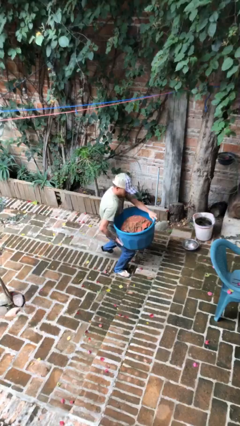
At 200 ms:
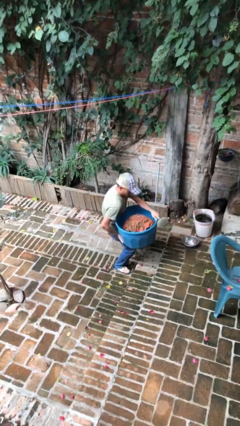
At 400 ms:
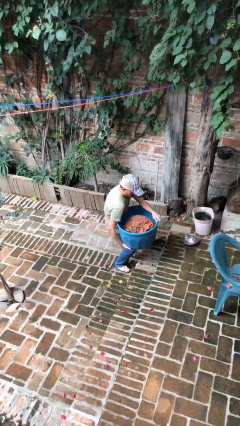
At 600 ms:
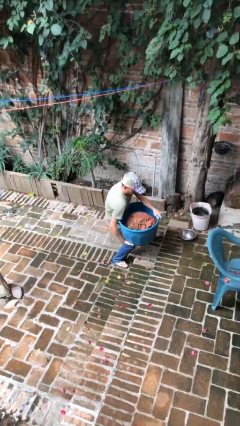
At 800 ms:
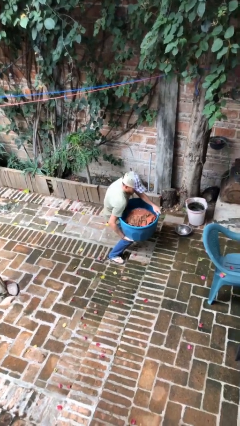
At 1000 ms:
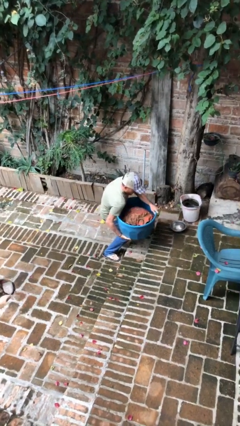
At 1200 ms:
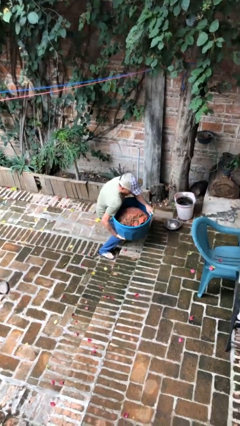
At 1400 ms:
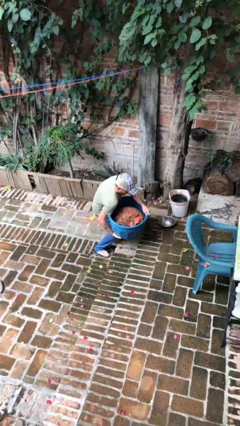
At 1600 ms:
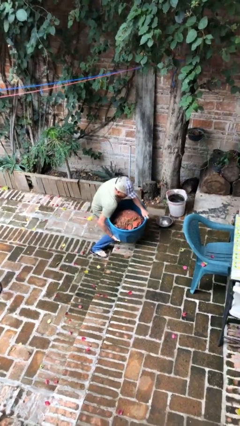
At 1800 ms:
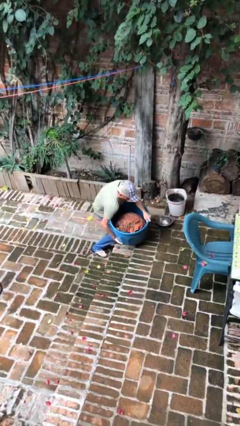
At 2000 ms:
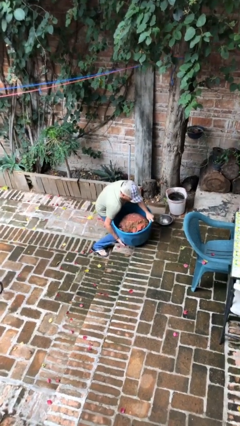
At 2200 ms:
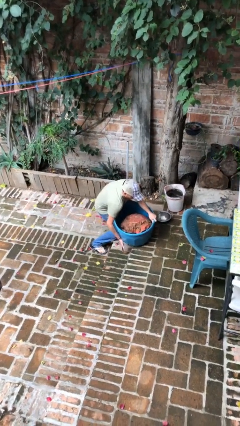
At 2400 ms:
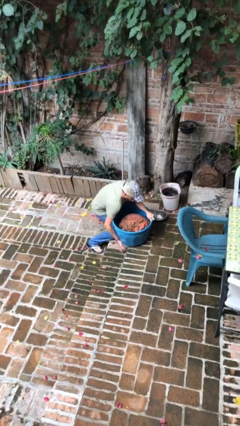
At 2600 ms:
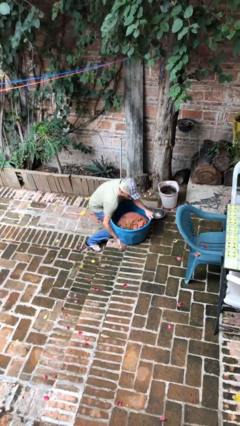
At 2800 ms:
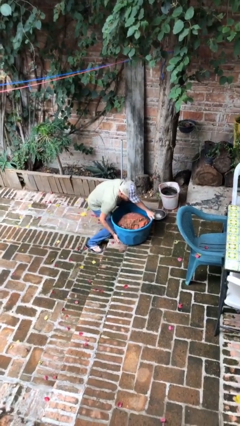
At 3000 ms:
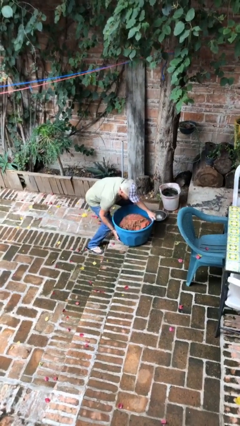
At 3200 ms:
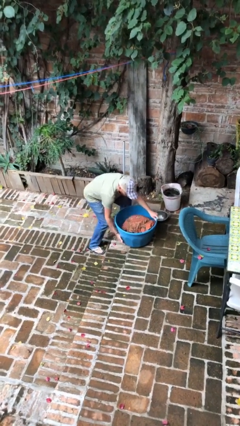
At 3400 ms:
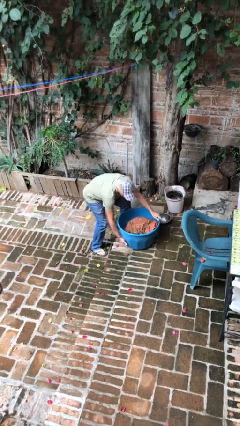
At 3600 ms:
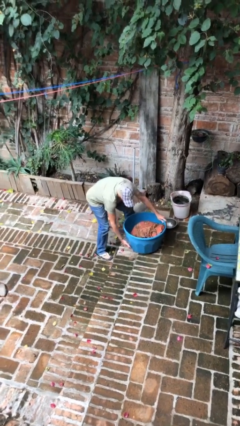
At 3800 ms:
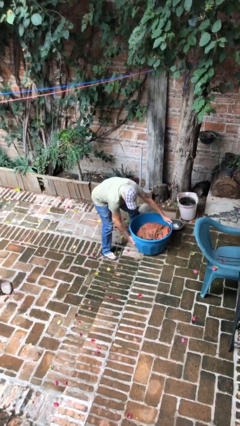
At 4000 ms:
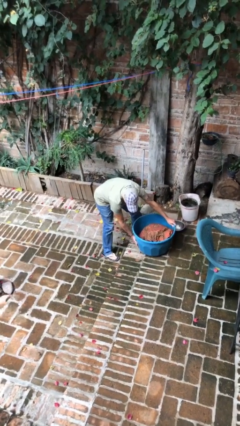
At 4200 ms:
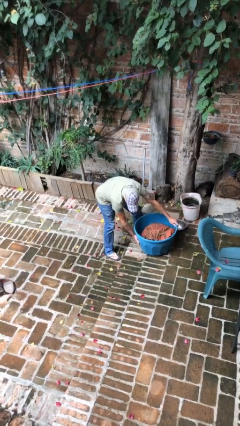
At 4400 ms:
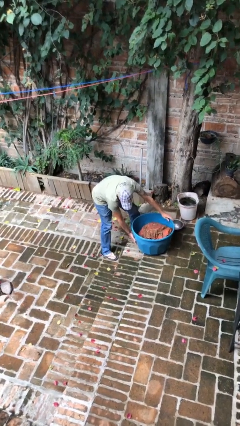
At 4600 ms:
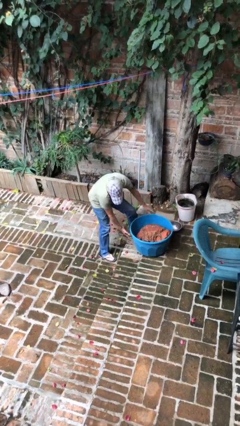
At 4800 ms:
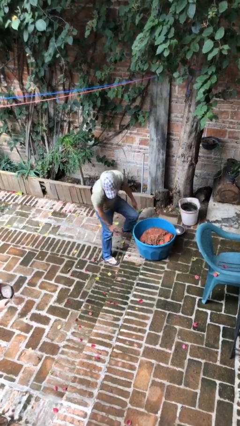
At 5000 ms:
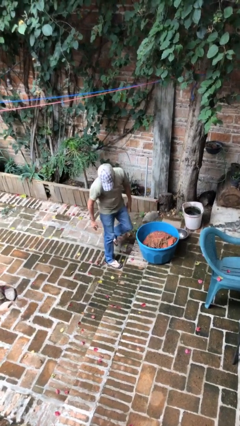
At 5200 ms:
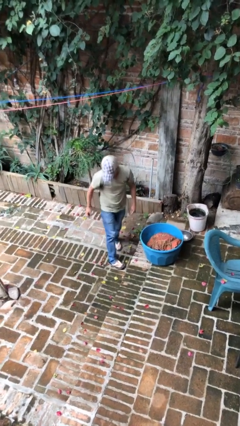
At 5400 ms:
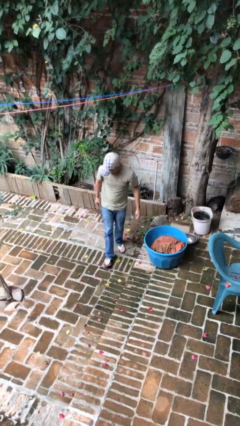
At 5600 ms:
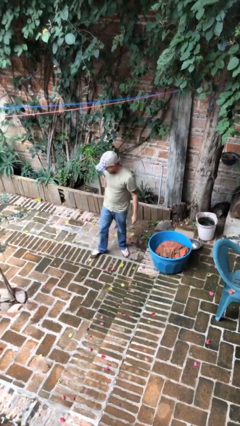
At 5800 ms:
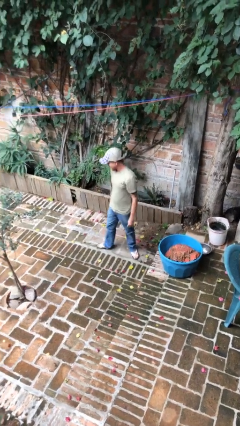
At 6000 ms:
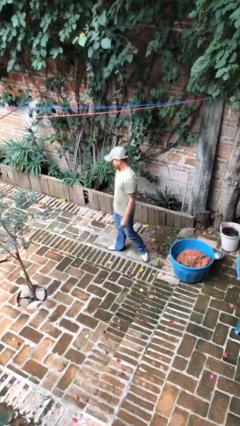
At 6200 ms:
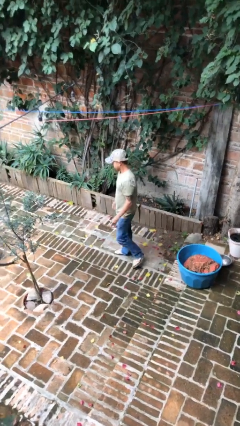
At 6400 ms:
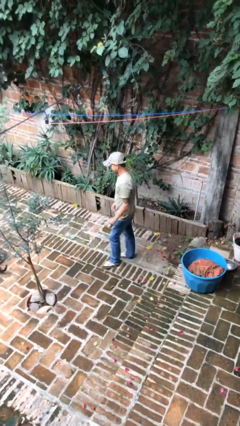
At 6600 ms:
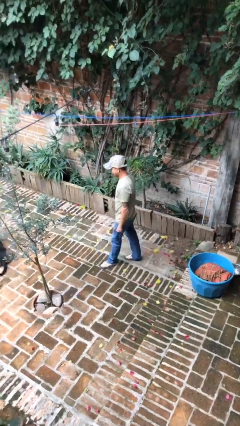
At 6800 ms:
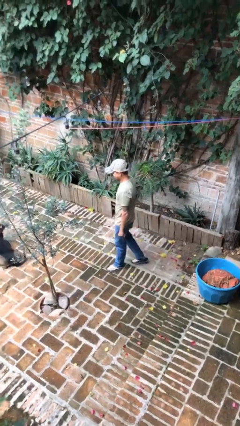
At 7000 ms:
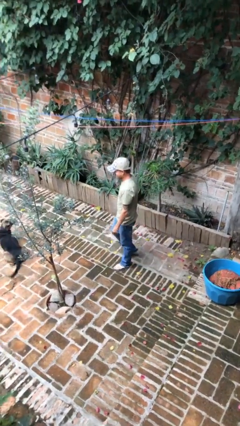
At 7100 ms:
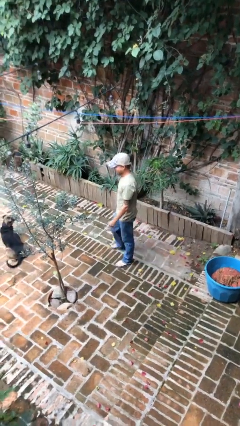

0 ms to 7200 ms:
person puts down object on floor

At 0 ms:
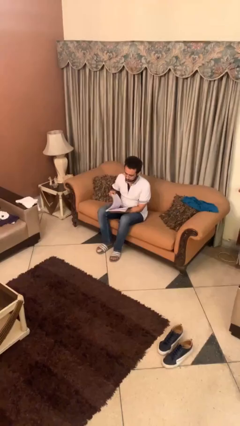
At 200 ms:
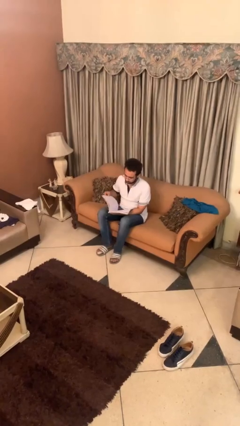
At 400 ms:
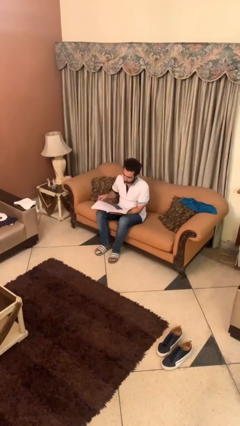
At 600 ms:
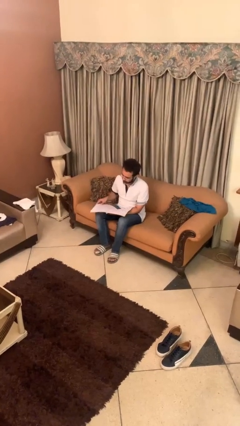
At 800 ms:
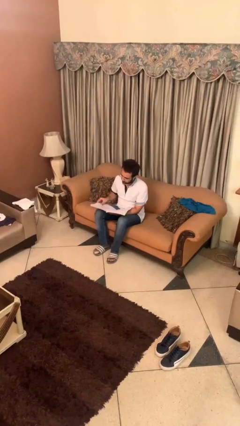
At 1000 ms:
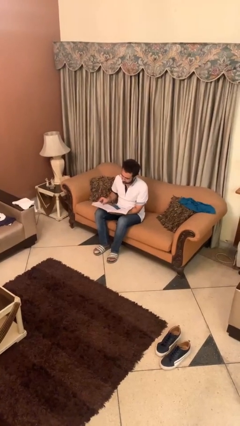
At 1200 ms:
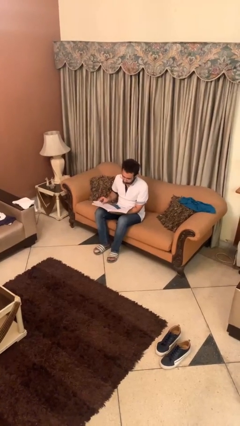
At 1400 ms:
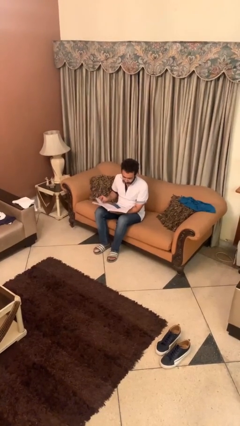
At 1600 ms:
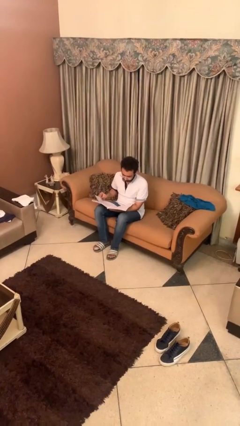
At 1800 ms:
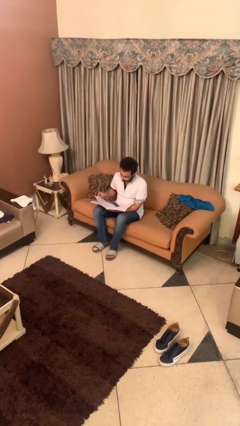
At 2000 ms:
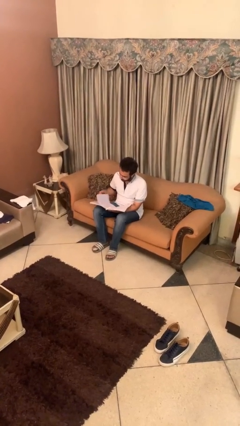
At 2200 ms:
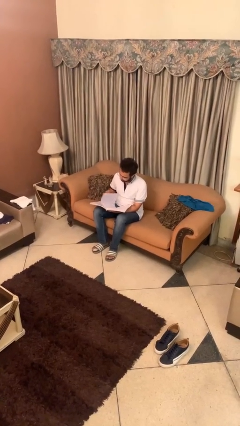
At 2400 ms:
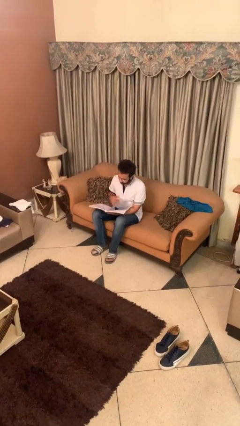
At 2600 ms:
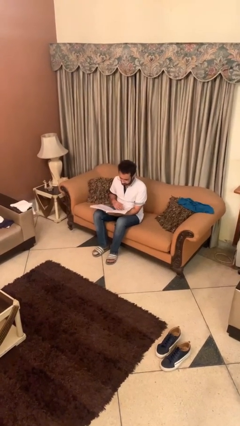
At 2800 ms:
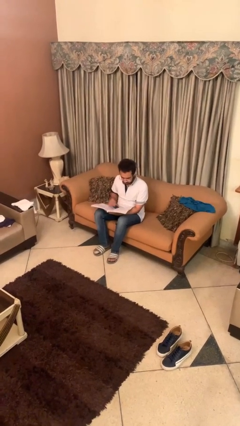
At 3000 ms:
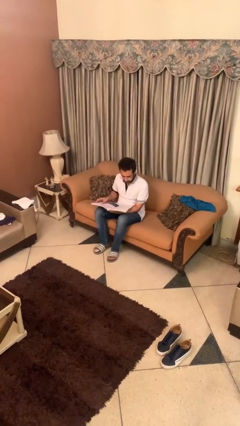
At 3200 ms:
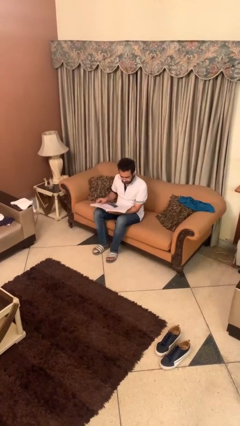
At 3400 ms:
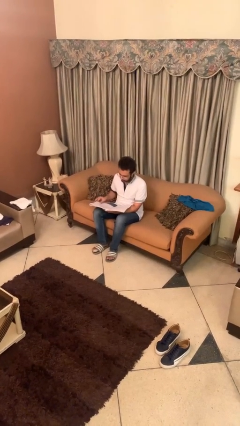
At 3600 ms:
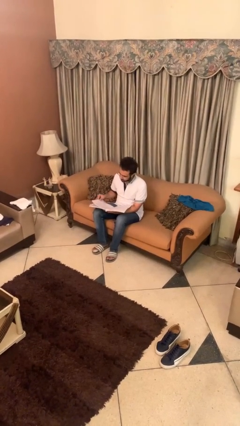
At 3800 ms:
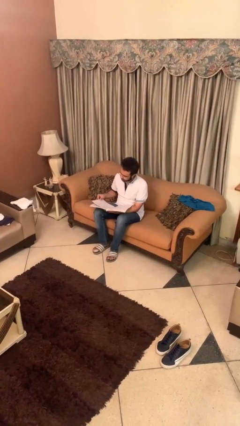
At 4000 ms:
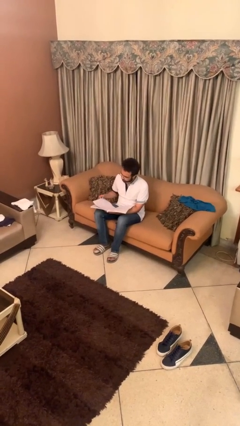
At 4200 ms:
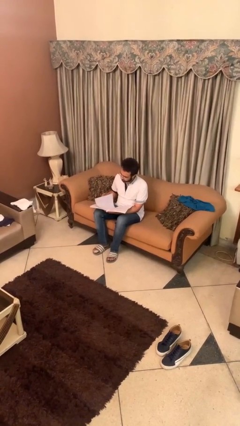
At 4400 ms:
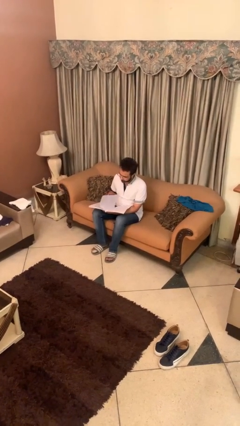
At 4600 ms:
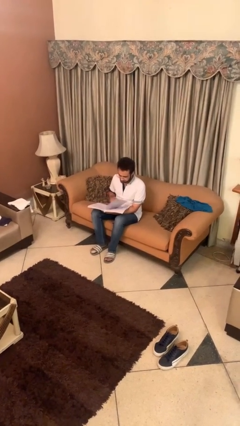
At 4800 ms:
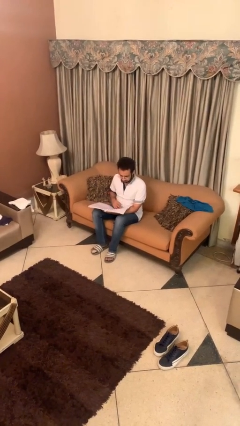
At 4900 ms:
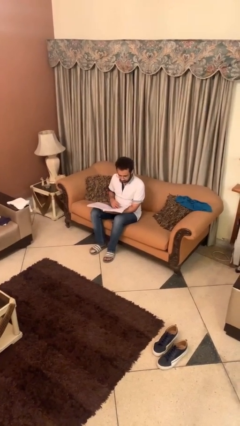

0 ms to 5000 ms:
person reads document

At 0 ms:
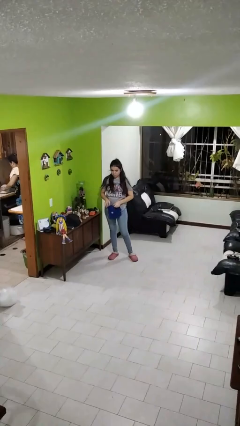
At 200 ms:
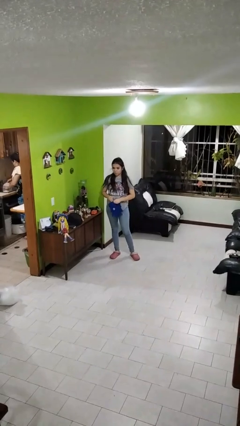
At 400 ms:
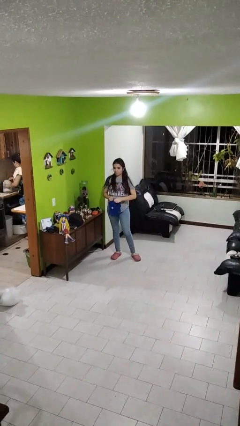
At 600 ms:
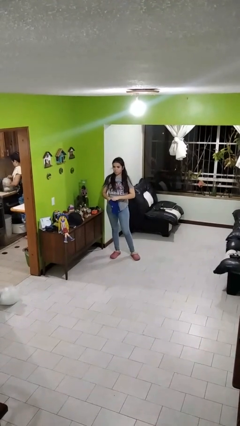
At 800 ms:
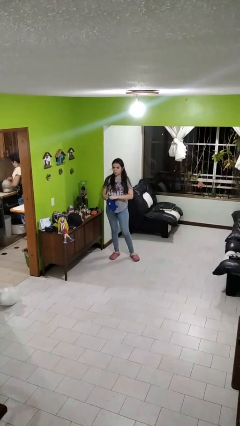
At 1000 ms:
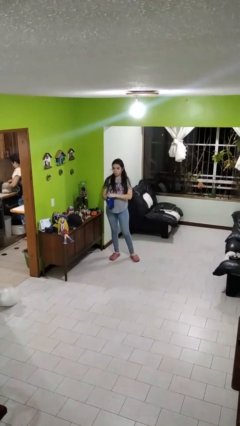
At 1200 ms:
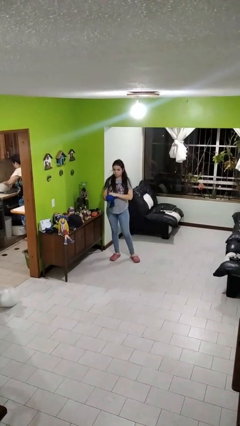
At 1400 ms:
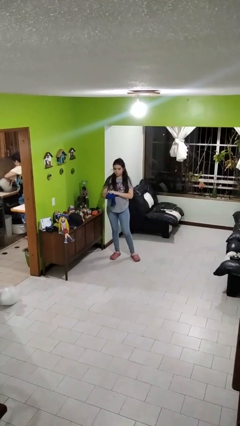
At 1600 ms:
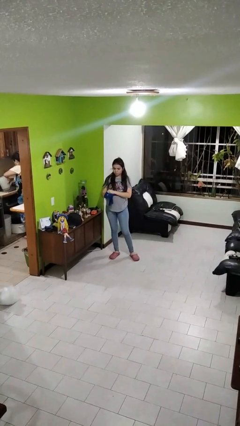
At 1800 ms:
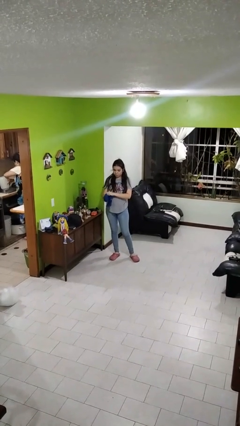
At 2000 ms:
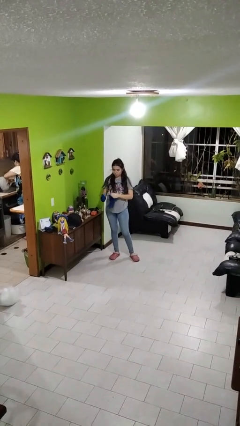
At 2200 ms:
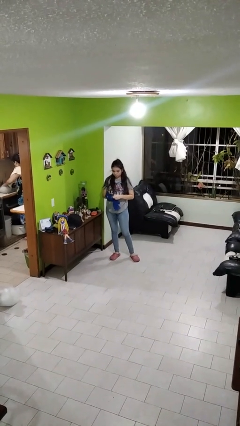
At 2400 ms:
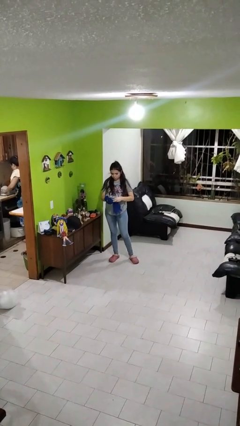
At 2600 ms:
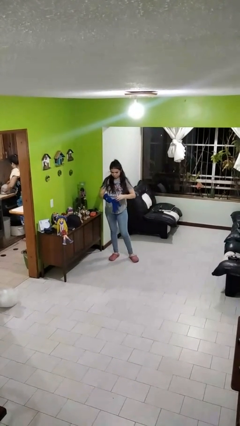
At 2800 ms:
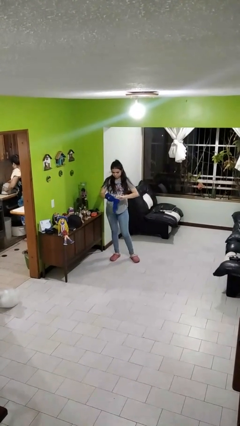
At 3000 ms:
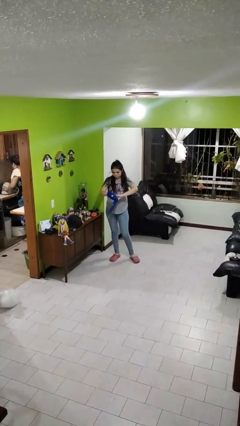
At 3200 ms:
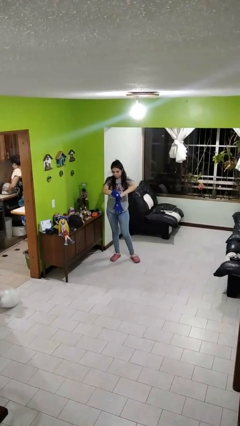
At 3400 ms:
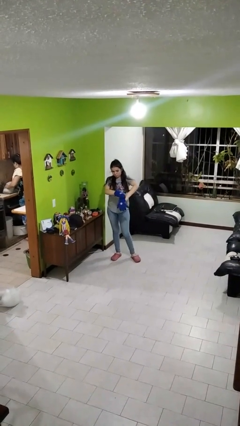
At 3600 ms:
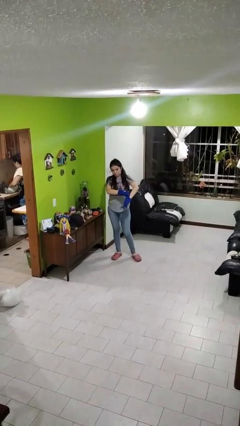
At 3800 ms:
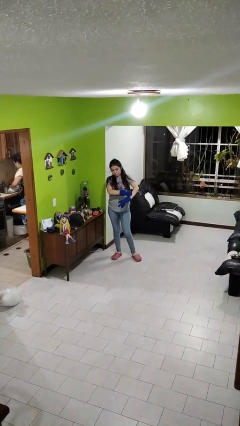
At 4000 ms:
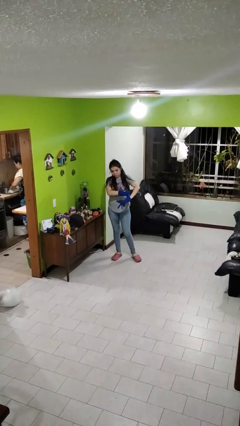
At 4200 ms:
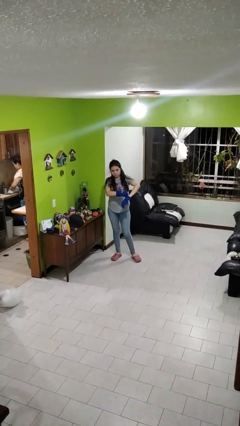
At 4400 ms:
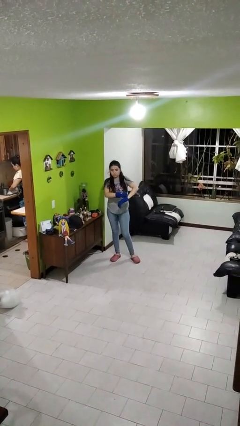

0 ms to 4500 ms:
person puts on gloves

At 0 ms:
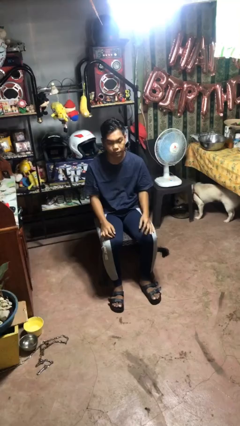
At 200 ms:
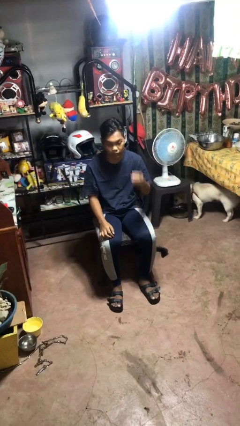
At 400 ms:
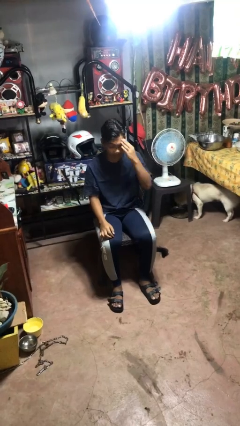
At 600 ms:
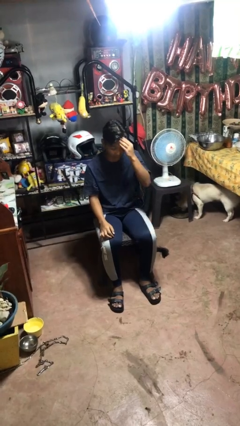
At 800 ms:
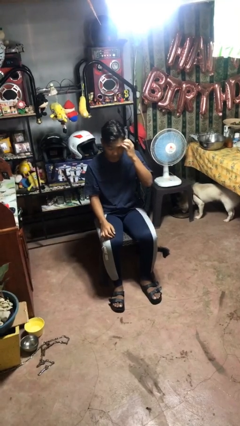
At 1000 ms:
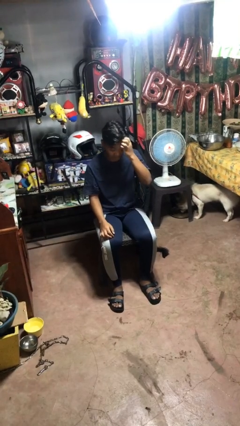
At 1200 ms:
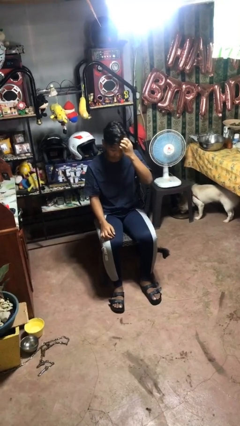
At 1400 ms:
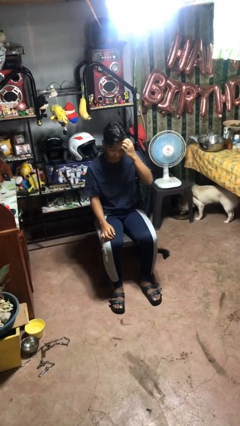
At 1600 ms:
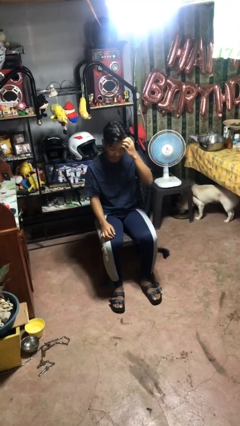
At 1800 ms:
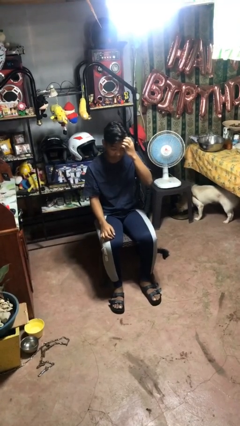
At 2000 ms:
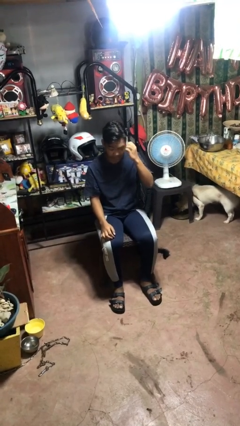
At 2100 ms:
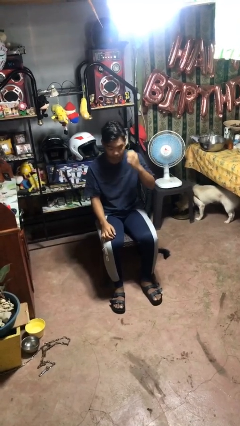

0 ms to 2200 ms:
person scratches face
